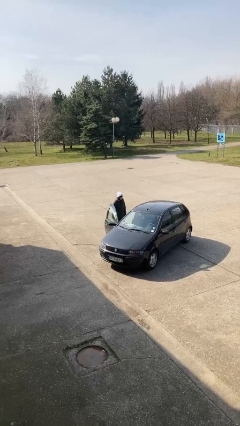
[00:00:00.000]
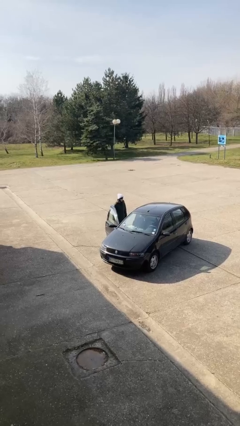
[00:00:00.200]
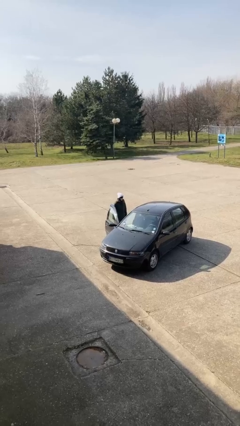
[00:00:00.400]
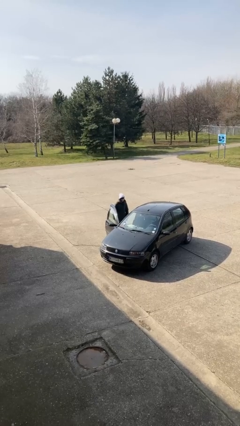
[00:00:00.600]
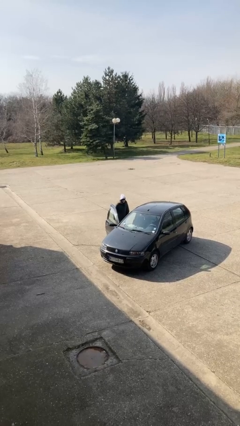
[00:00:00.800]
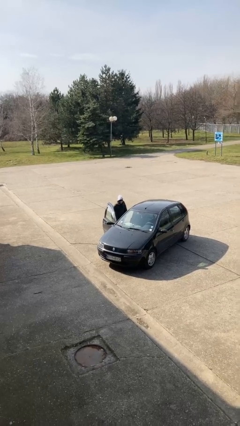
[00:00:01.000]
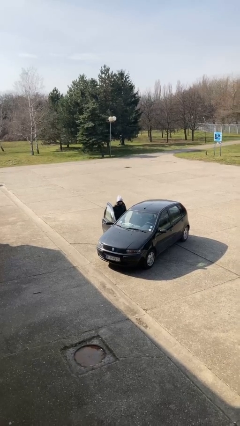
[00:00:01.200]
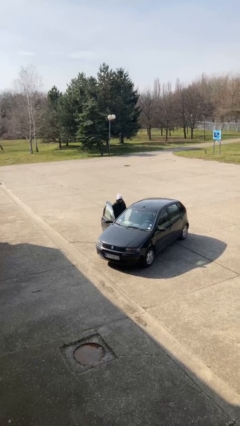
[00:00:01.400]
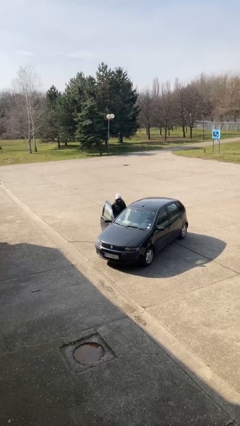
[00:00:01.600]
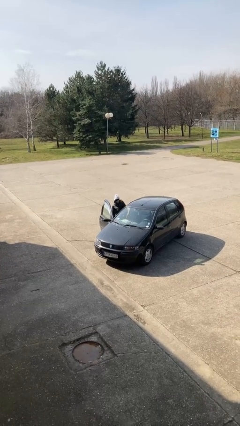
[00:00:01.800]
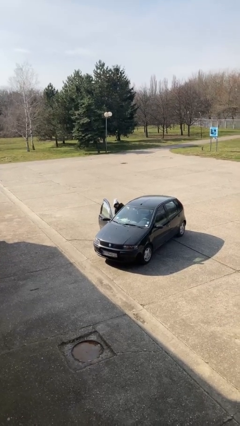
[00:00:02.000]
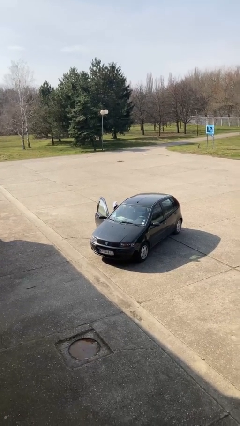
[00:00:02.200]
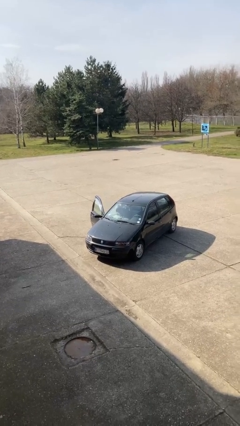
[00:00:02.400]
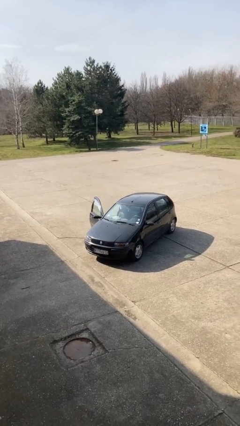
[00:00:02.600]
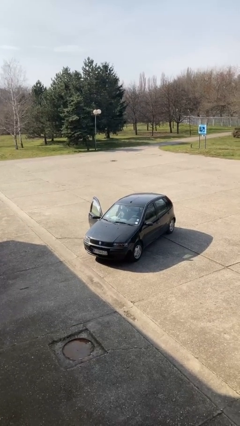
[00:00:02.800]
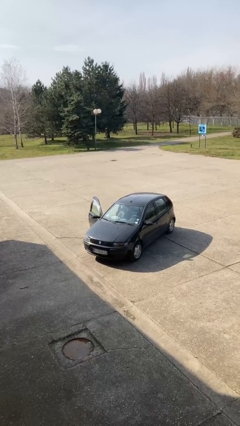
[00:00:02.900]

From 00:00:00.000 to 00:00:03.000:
person enters car

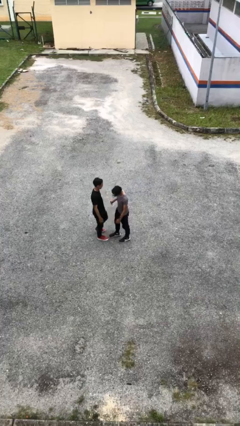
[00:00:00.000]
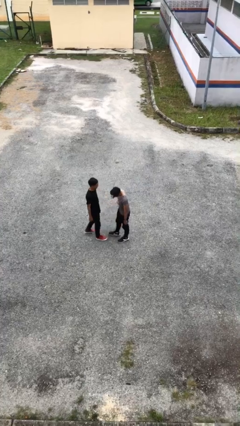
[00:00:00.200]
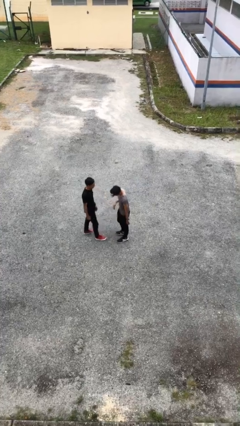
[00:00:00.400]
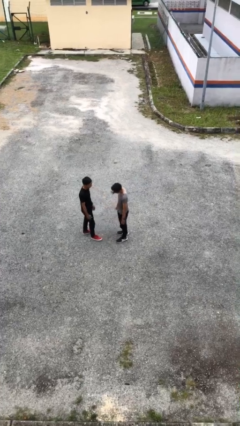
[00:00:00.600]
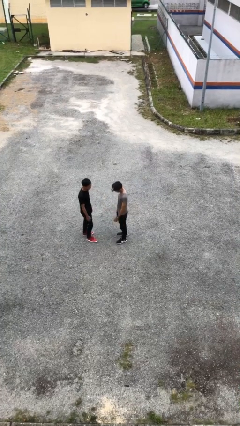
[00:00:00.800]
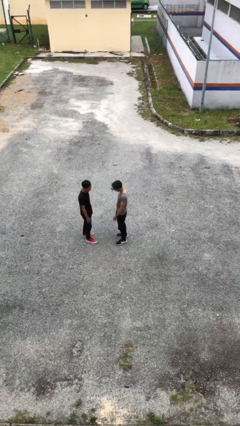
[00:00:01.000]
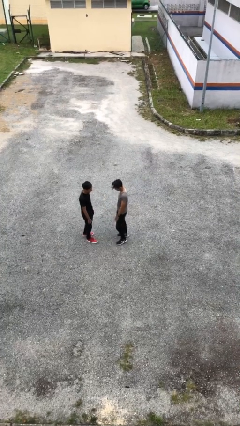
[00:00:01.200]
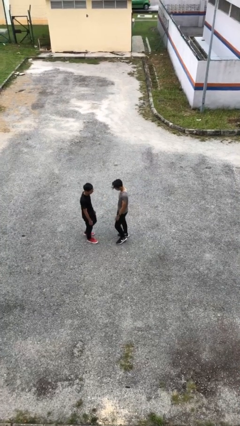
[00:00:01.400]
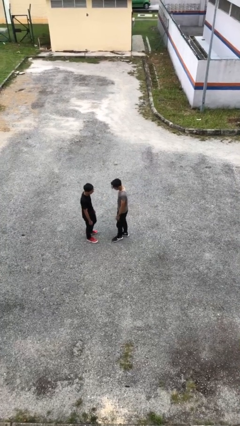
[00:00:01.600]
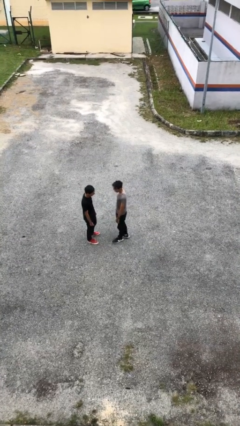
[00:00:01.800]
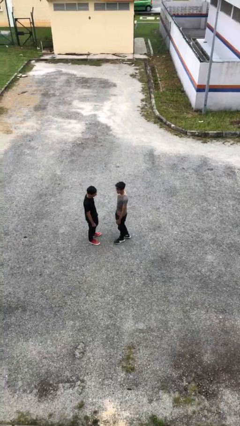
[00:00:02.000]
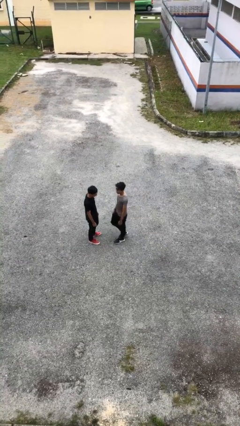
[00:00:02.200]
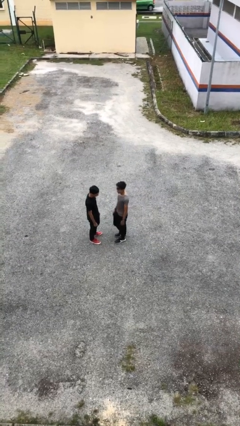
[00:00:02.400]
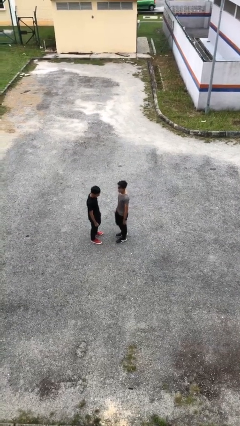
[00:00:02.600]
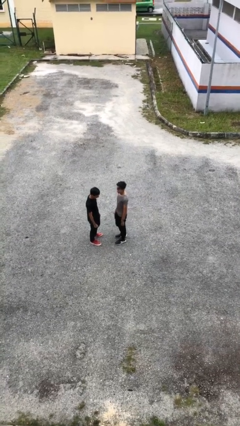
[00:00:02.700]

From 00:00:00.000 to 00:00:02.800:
person talks to person

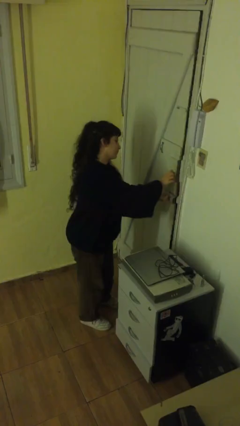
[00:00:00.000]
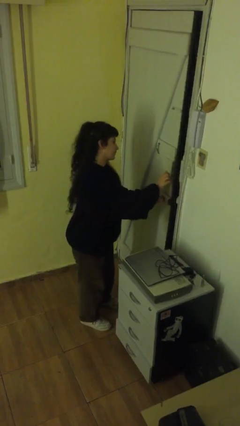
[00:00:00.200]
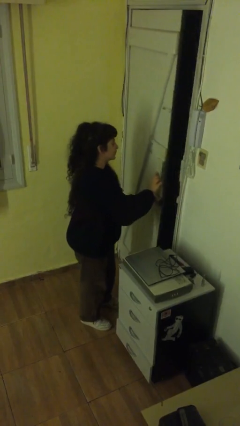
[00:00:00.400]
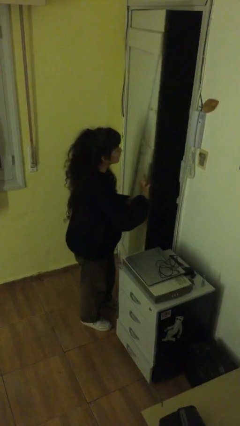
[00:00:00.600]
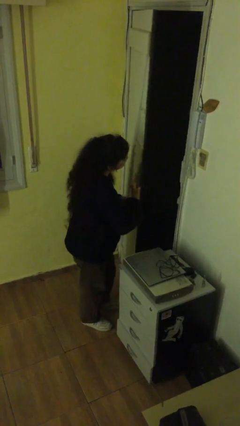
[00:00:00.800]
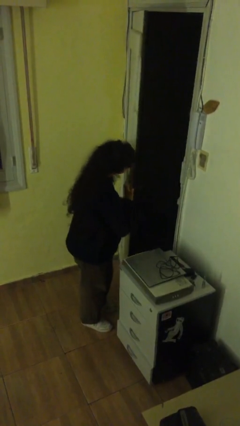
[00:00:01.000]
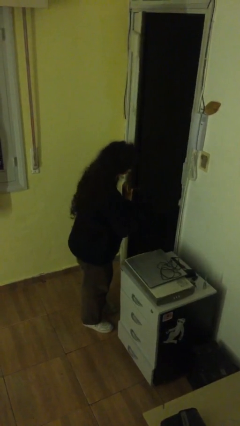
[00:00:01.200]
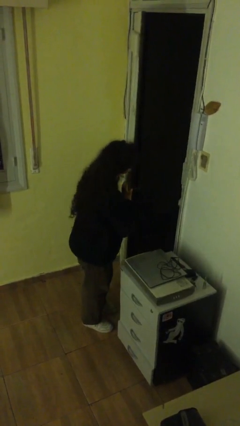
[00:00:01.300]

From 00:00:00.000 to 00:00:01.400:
person opens facility door

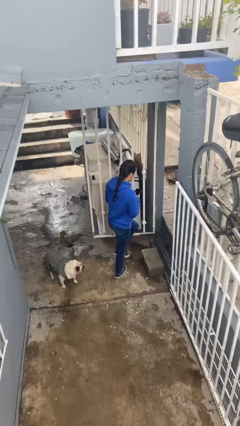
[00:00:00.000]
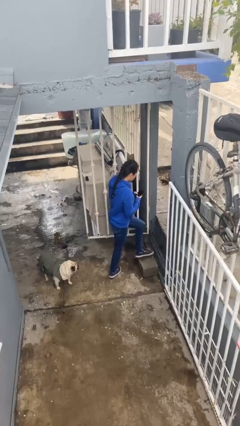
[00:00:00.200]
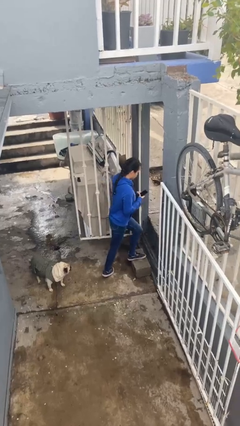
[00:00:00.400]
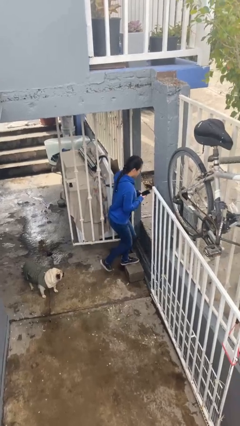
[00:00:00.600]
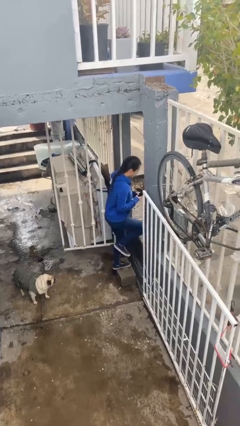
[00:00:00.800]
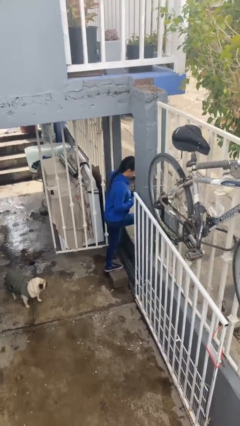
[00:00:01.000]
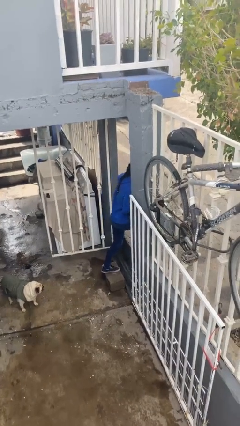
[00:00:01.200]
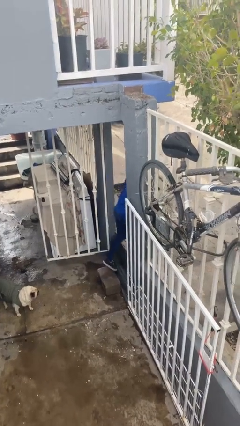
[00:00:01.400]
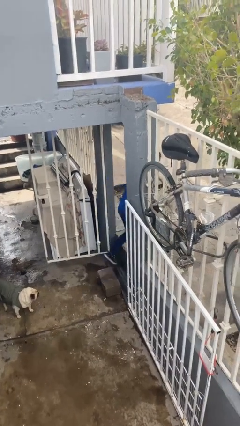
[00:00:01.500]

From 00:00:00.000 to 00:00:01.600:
person exits scene through structure

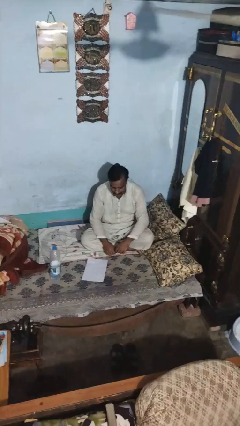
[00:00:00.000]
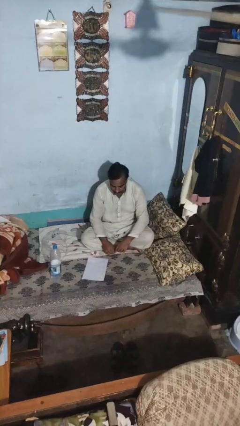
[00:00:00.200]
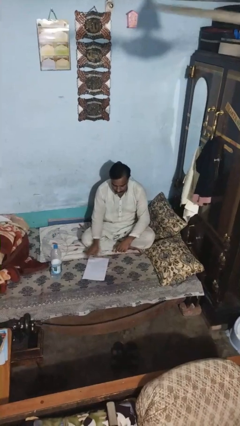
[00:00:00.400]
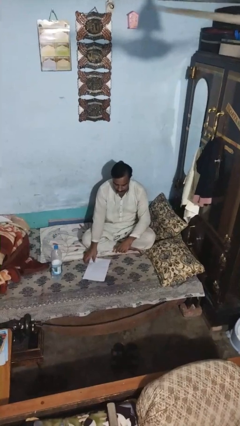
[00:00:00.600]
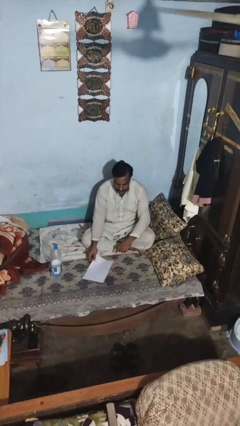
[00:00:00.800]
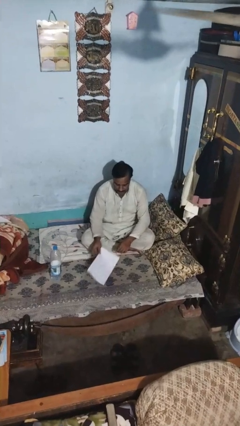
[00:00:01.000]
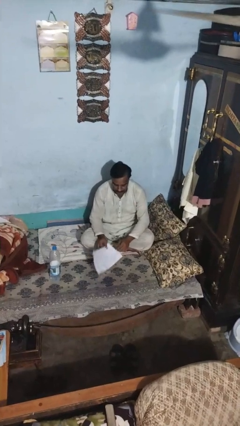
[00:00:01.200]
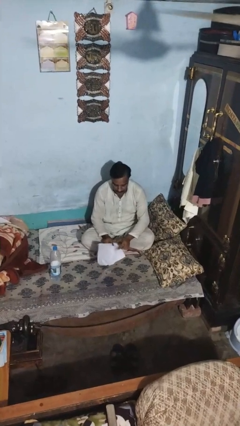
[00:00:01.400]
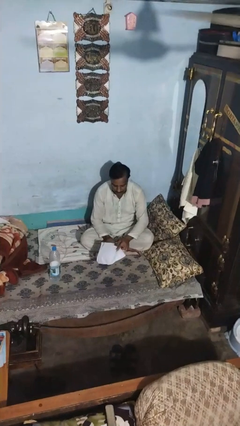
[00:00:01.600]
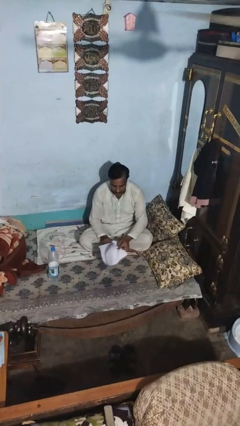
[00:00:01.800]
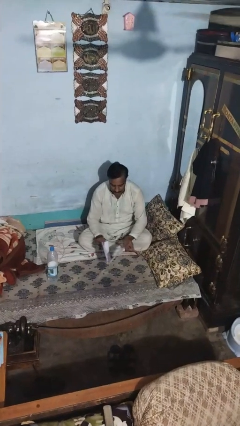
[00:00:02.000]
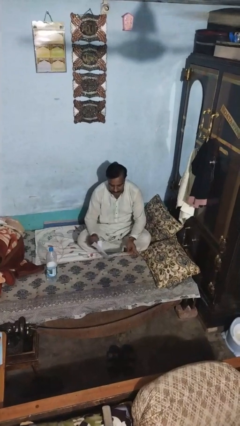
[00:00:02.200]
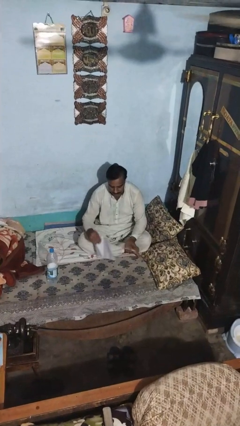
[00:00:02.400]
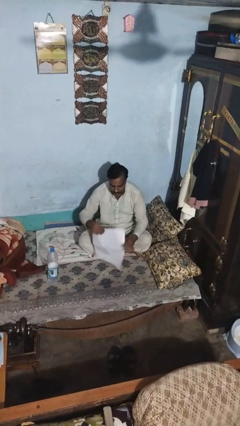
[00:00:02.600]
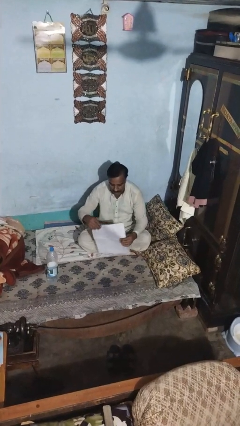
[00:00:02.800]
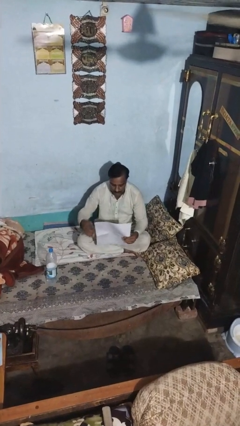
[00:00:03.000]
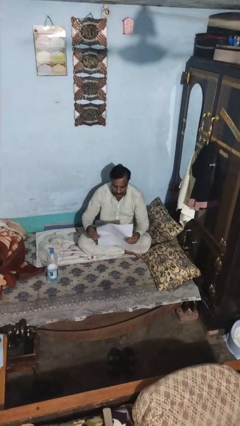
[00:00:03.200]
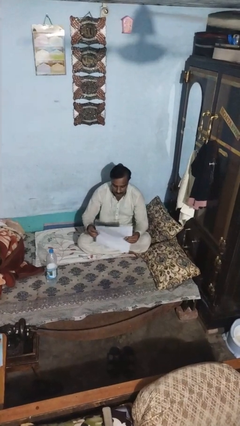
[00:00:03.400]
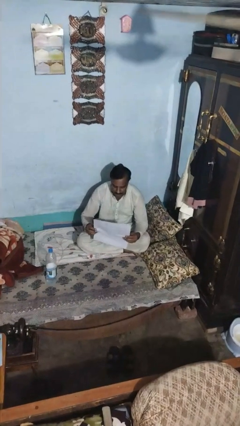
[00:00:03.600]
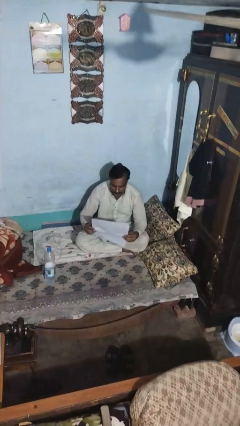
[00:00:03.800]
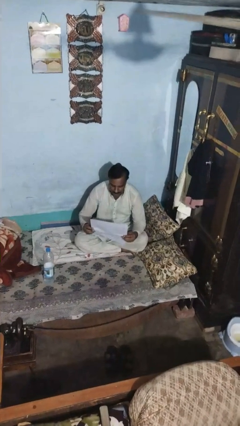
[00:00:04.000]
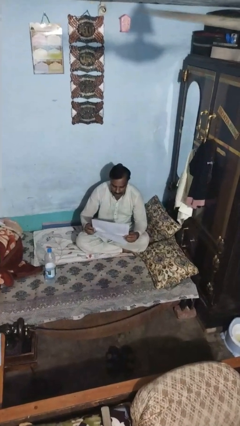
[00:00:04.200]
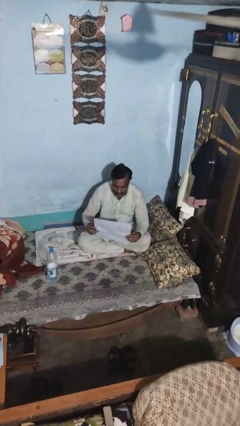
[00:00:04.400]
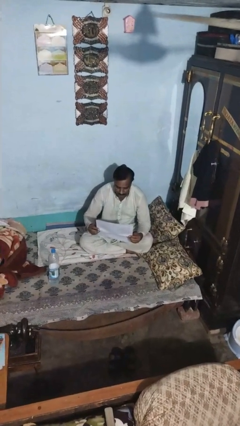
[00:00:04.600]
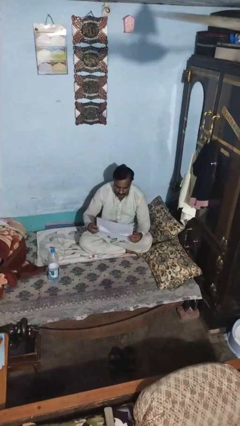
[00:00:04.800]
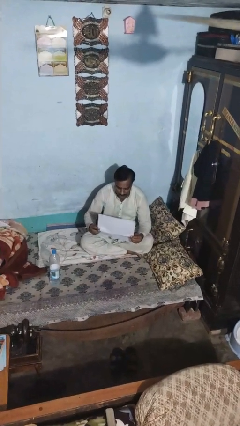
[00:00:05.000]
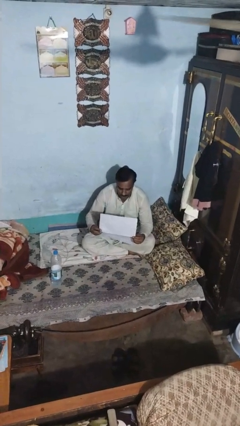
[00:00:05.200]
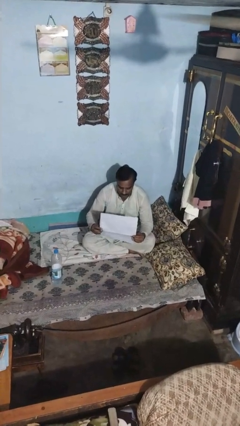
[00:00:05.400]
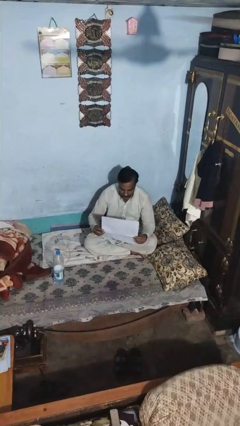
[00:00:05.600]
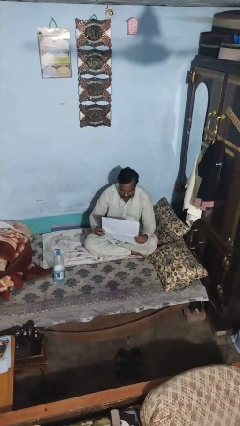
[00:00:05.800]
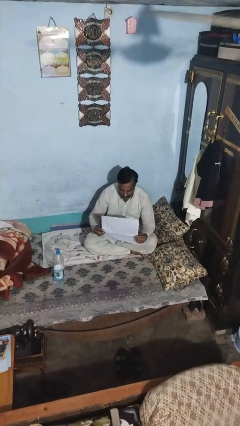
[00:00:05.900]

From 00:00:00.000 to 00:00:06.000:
person reads newspaper

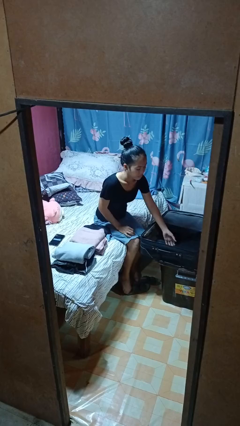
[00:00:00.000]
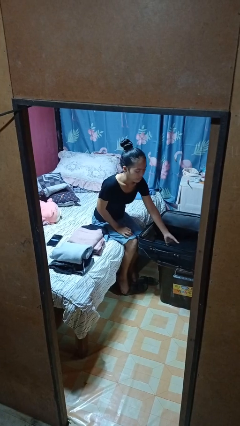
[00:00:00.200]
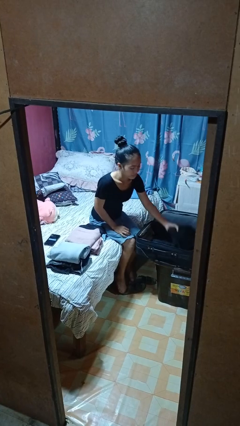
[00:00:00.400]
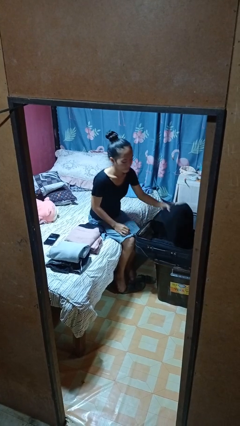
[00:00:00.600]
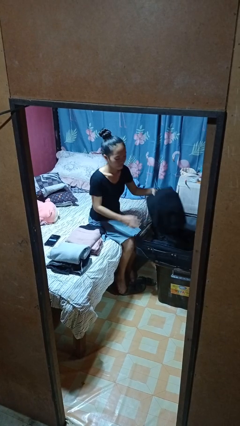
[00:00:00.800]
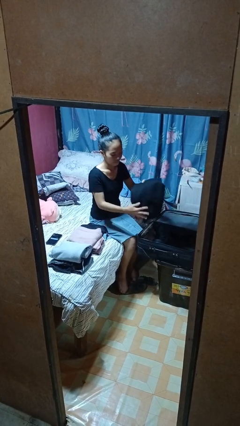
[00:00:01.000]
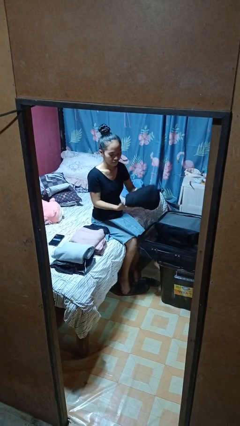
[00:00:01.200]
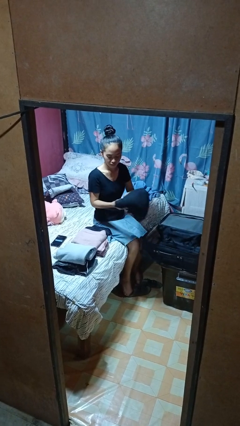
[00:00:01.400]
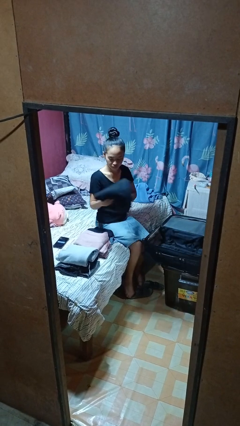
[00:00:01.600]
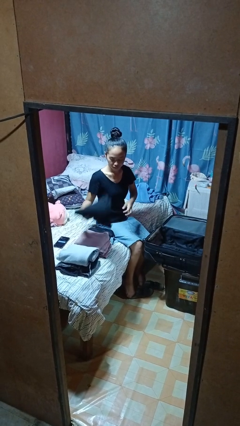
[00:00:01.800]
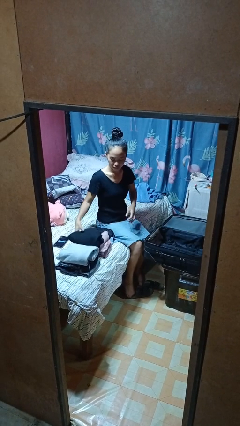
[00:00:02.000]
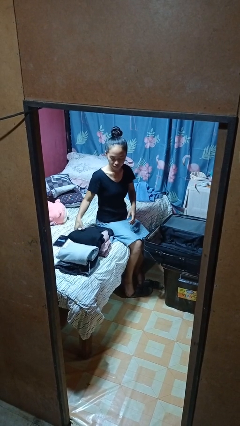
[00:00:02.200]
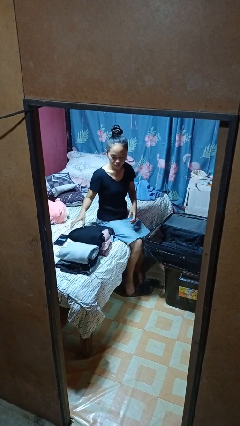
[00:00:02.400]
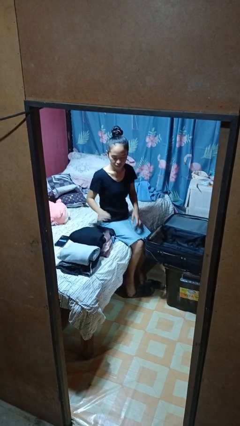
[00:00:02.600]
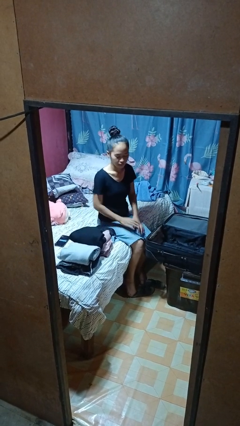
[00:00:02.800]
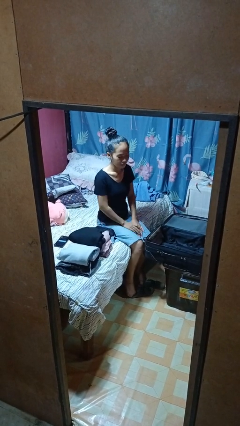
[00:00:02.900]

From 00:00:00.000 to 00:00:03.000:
person unloads clothes from suitcase
